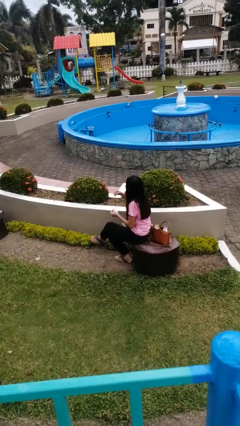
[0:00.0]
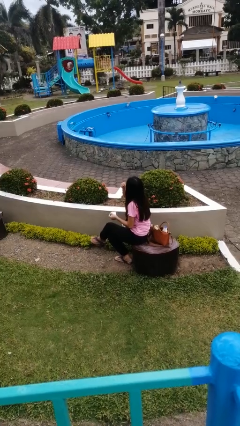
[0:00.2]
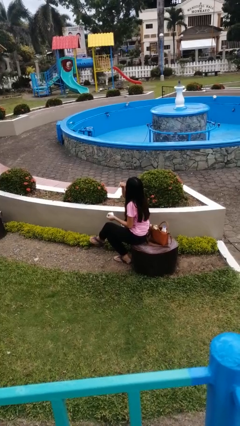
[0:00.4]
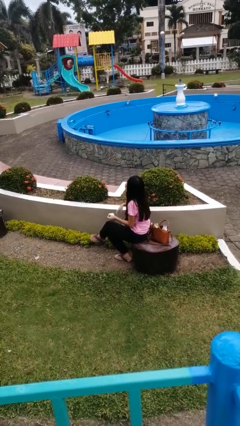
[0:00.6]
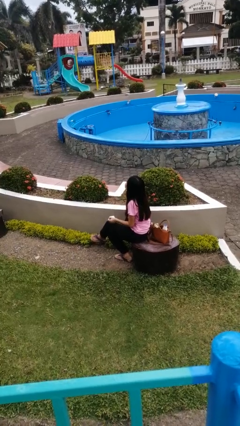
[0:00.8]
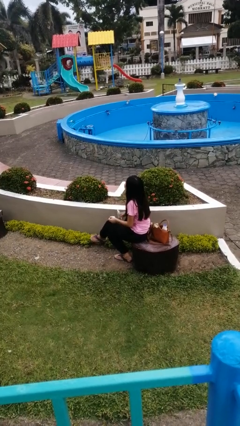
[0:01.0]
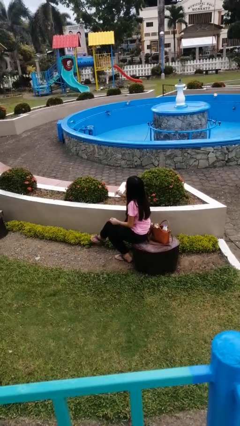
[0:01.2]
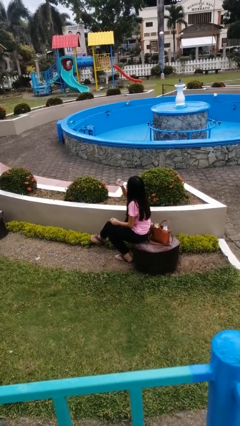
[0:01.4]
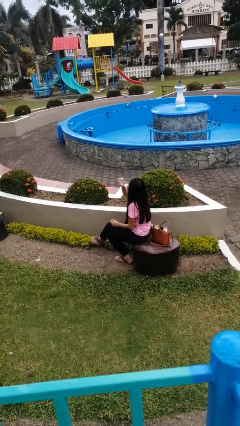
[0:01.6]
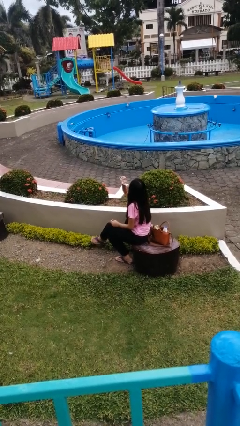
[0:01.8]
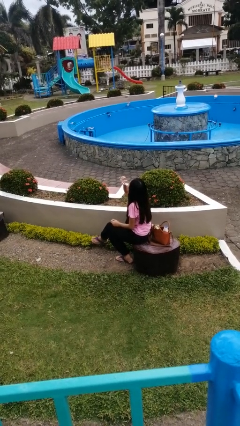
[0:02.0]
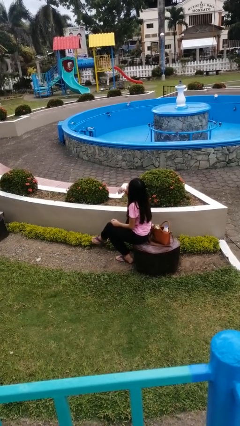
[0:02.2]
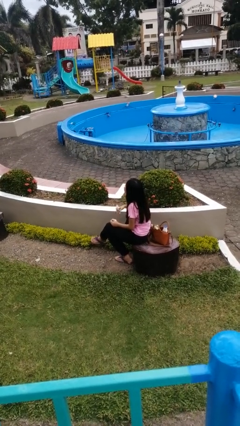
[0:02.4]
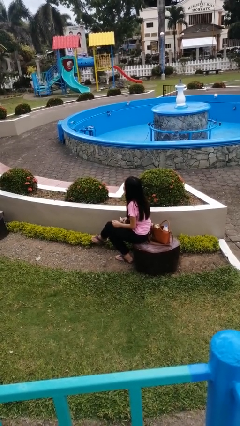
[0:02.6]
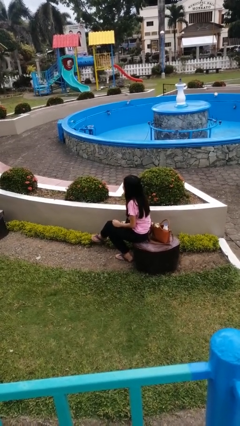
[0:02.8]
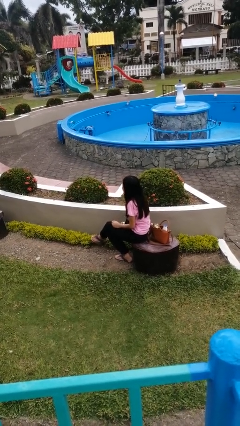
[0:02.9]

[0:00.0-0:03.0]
person drinks from cup

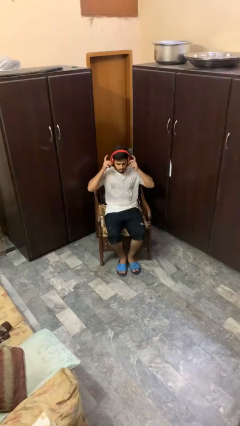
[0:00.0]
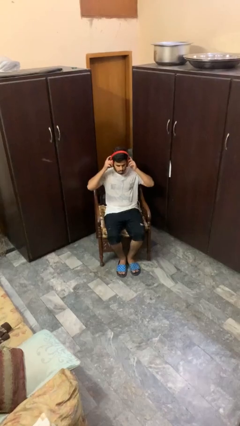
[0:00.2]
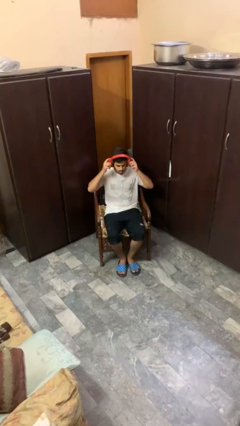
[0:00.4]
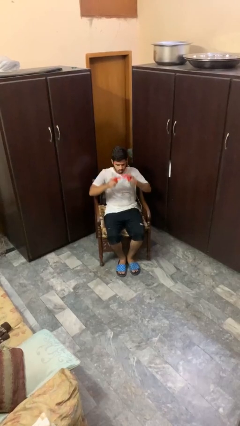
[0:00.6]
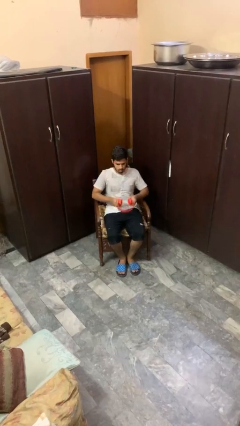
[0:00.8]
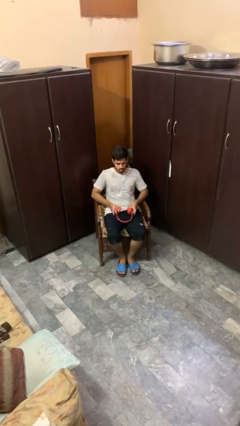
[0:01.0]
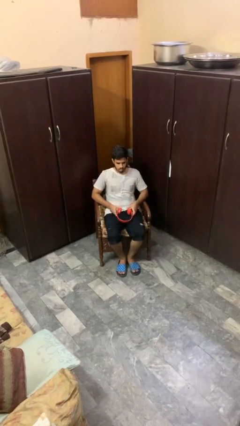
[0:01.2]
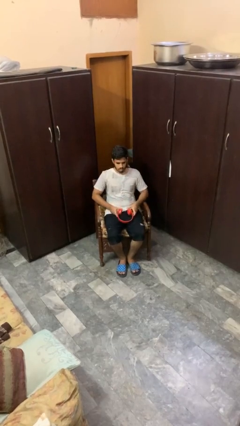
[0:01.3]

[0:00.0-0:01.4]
person takes off headphones

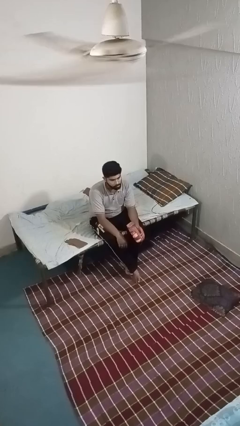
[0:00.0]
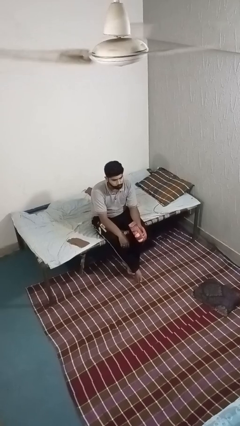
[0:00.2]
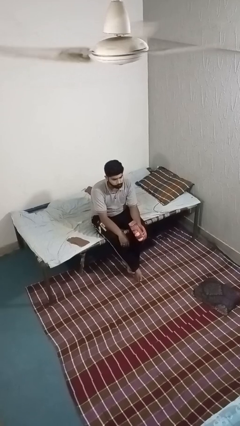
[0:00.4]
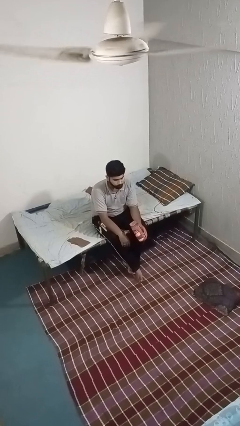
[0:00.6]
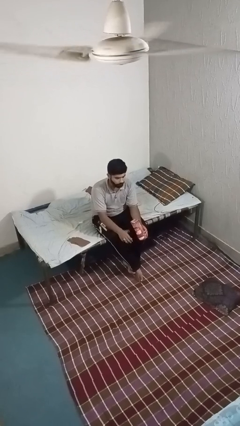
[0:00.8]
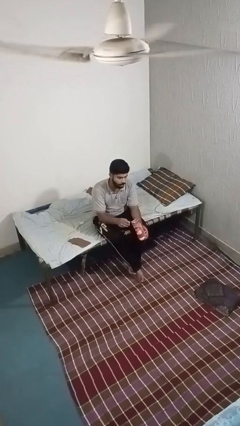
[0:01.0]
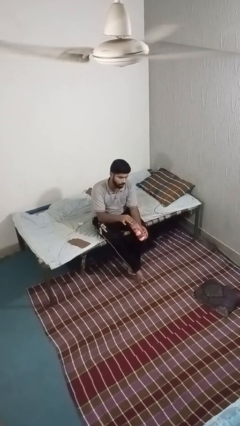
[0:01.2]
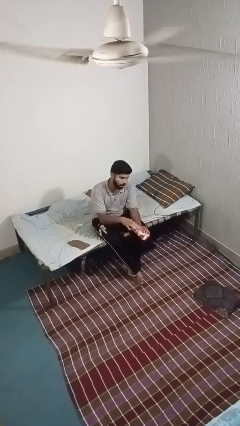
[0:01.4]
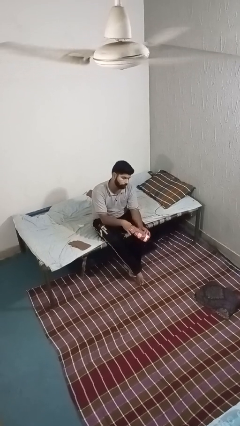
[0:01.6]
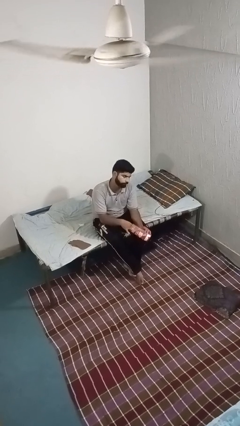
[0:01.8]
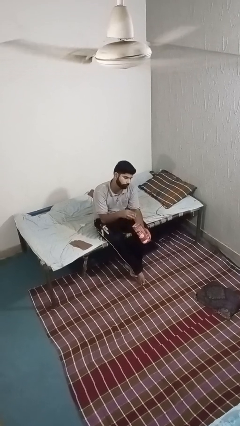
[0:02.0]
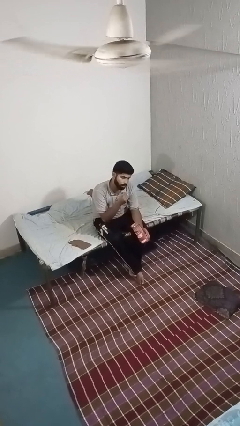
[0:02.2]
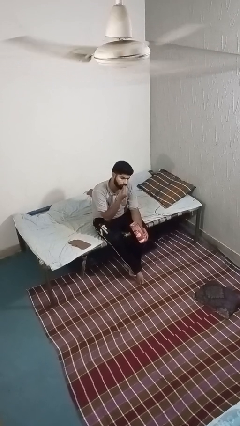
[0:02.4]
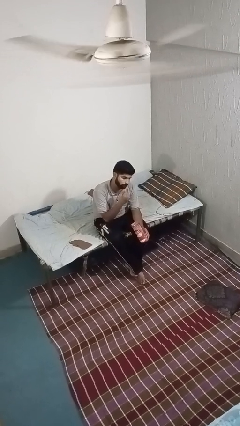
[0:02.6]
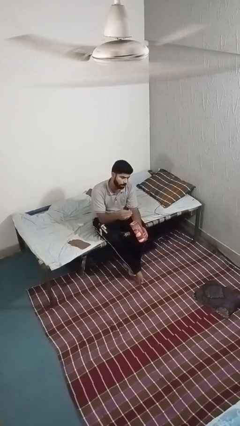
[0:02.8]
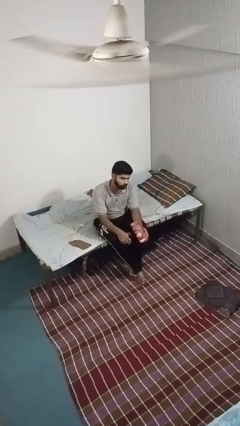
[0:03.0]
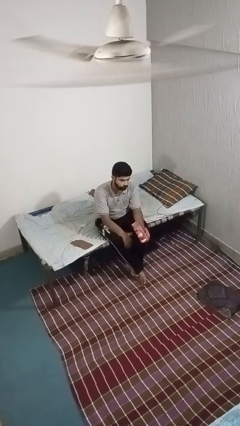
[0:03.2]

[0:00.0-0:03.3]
person eats snack from bag

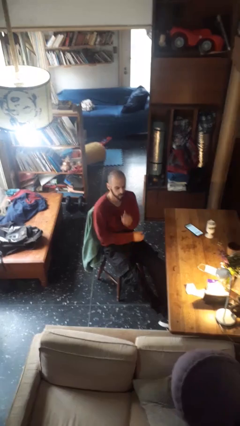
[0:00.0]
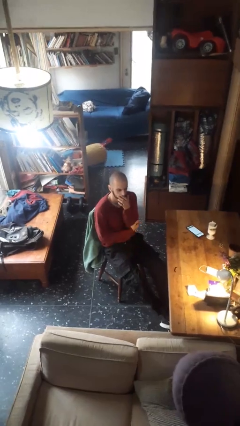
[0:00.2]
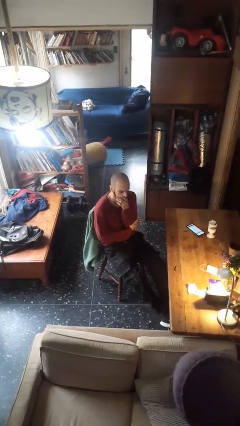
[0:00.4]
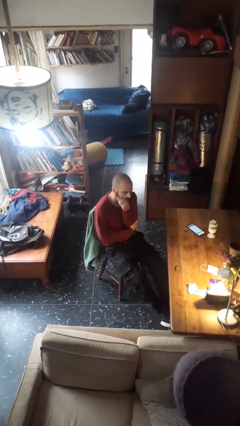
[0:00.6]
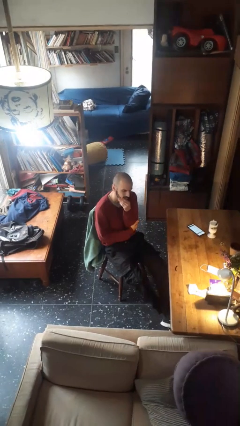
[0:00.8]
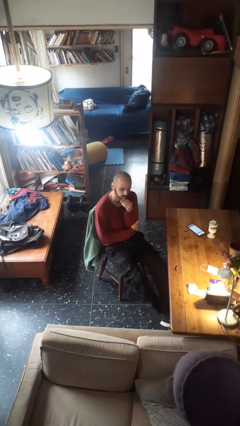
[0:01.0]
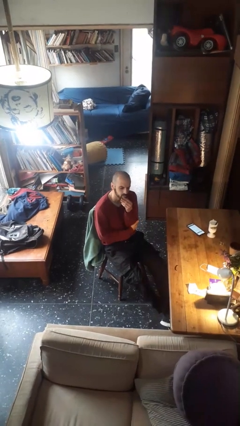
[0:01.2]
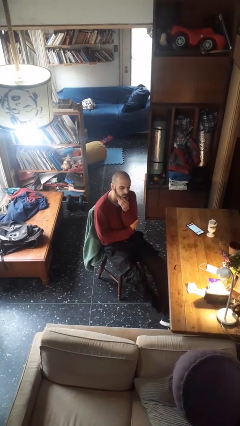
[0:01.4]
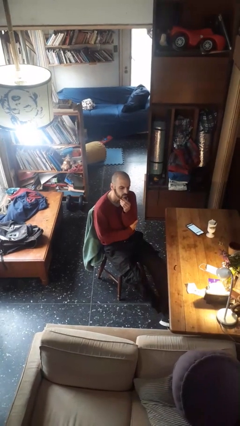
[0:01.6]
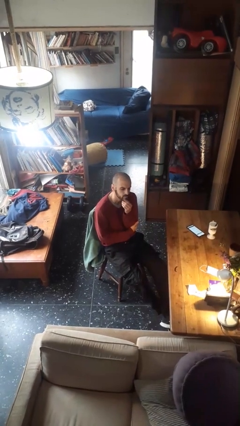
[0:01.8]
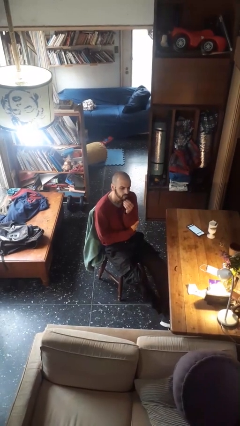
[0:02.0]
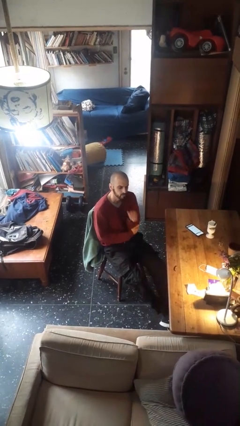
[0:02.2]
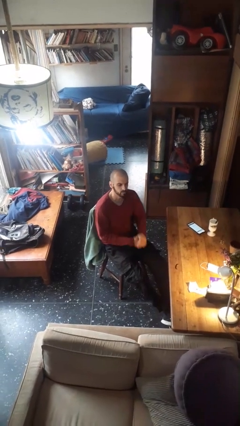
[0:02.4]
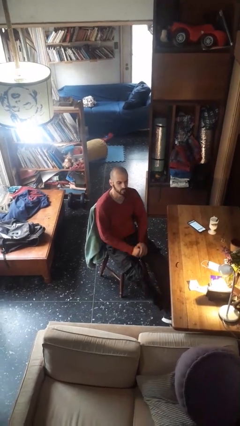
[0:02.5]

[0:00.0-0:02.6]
person strokes chin

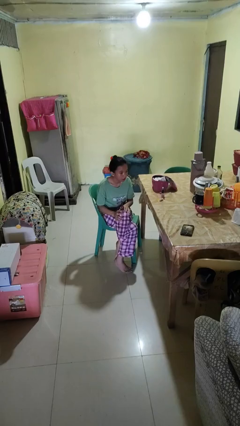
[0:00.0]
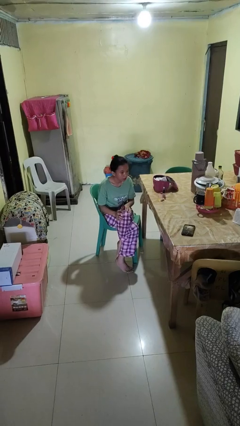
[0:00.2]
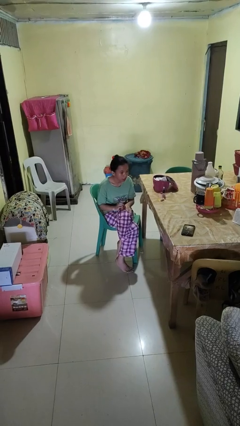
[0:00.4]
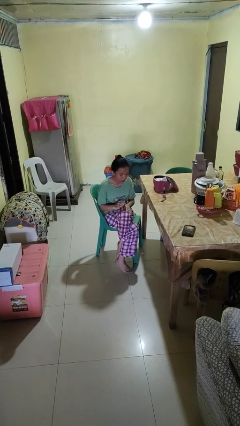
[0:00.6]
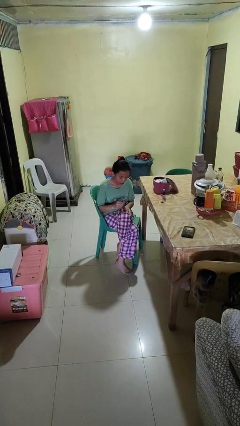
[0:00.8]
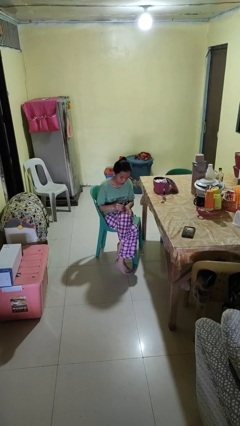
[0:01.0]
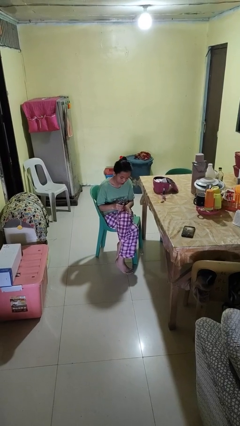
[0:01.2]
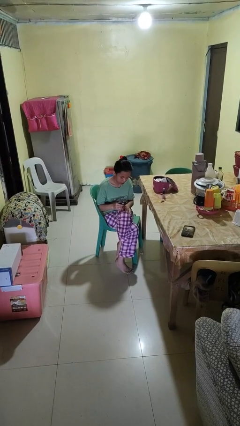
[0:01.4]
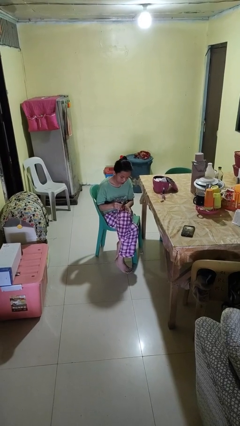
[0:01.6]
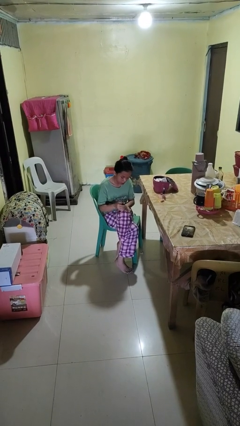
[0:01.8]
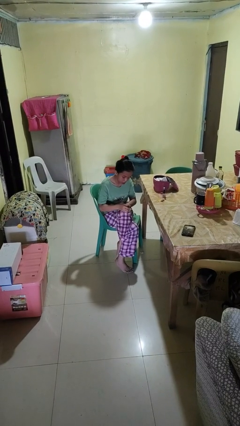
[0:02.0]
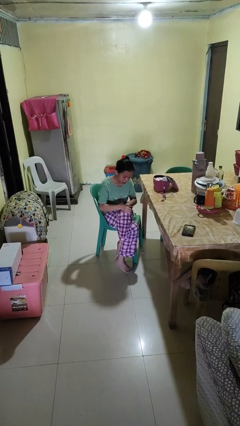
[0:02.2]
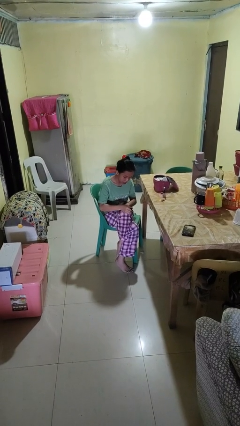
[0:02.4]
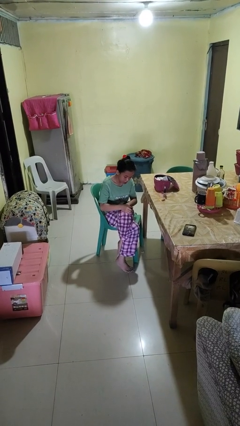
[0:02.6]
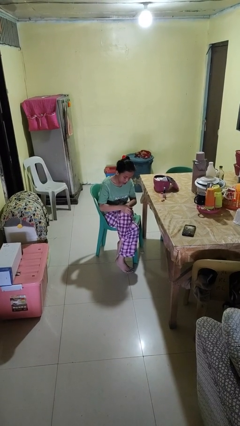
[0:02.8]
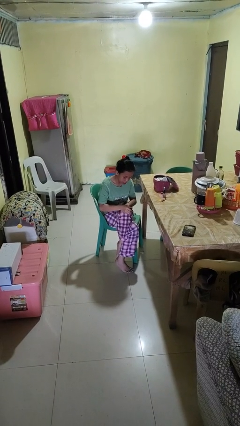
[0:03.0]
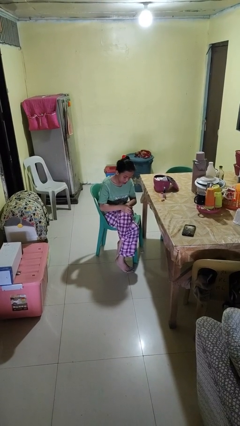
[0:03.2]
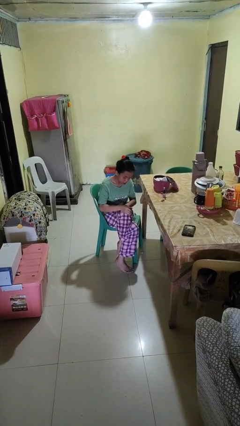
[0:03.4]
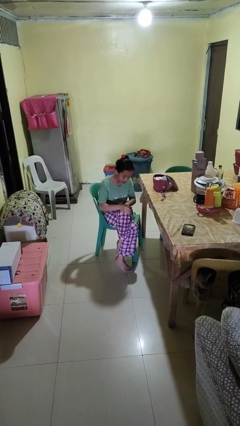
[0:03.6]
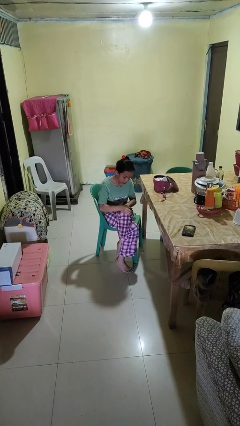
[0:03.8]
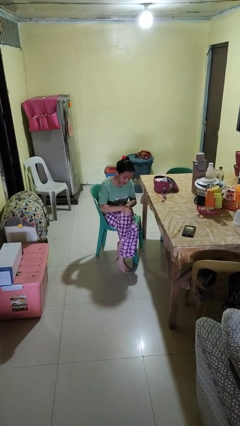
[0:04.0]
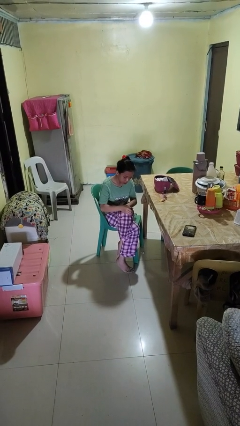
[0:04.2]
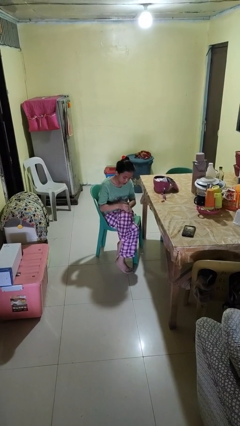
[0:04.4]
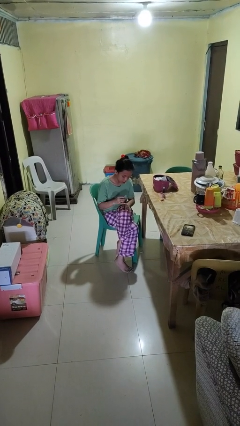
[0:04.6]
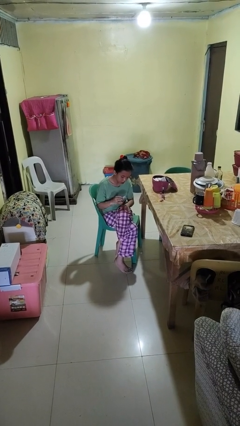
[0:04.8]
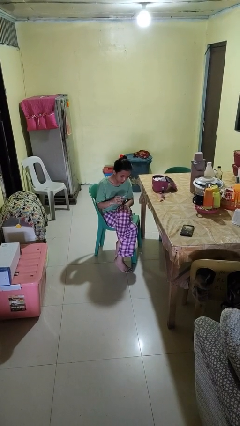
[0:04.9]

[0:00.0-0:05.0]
person paints fingernails

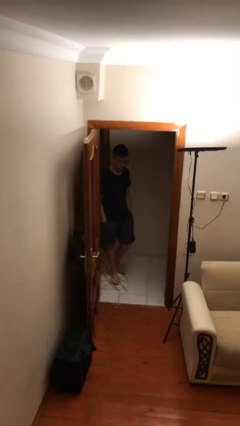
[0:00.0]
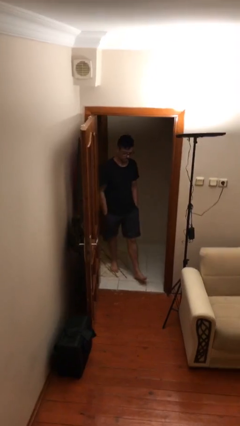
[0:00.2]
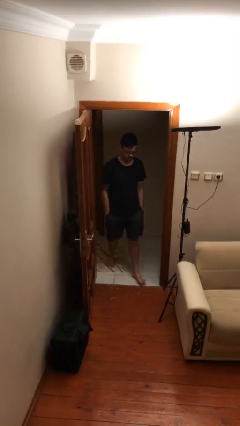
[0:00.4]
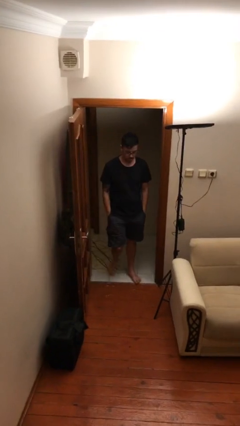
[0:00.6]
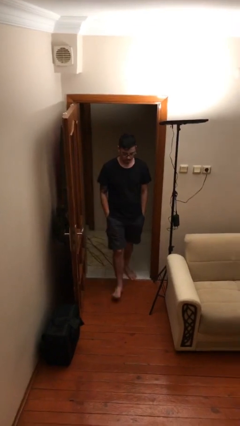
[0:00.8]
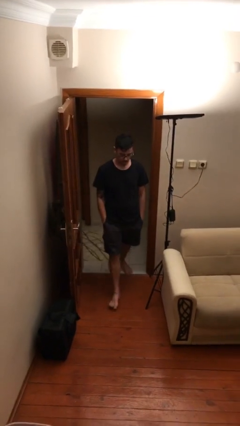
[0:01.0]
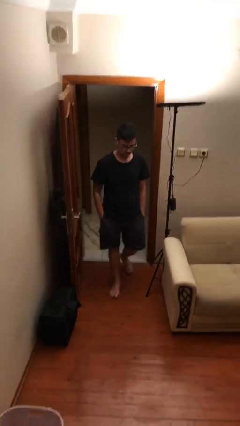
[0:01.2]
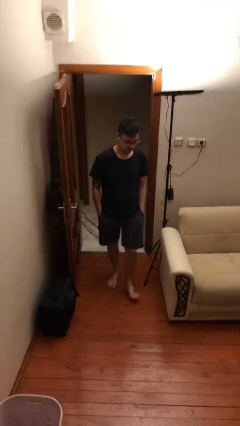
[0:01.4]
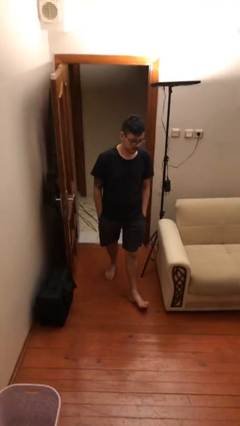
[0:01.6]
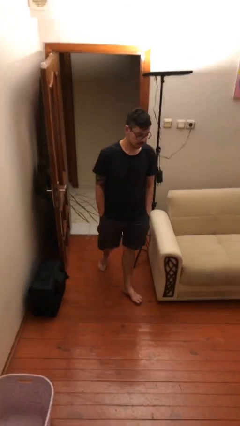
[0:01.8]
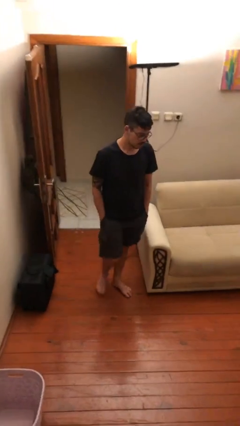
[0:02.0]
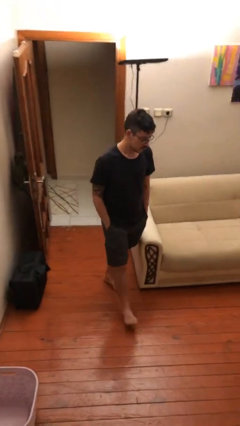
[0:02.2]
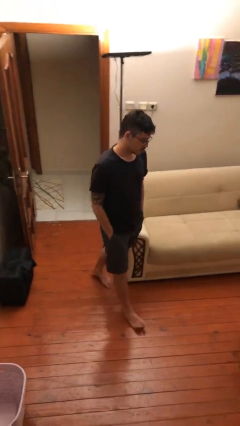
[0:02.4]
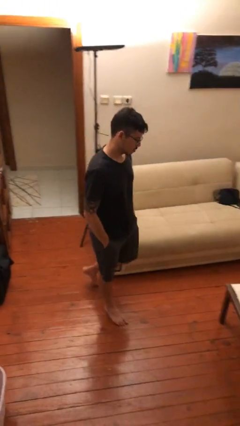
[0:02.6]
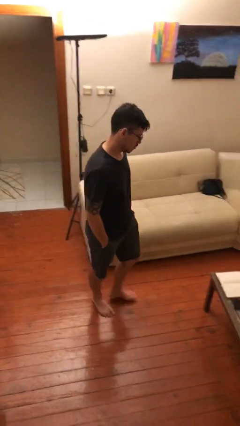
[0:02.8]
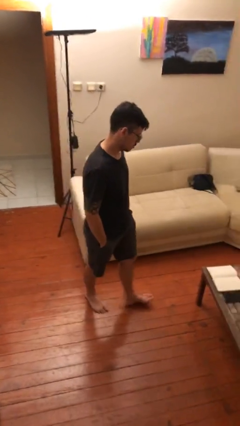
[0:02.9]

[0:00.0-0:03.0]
person enters scene through structure
